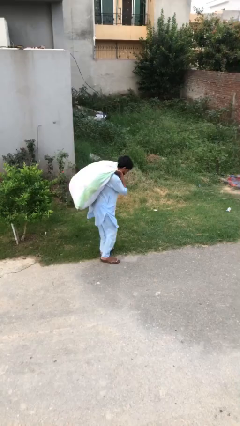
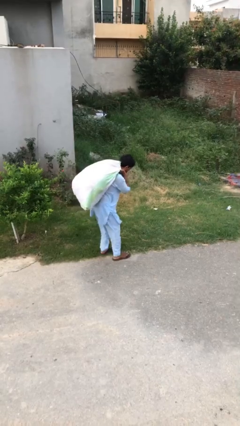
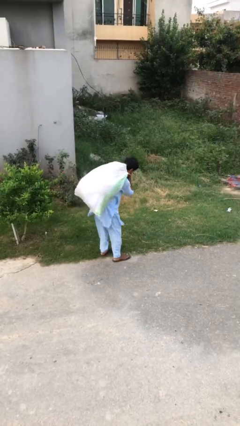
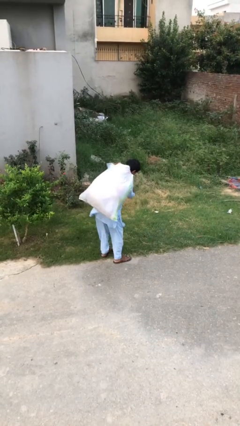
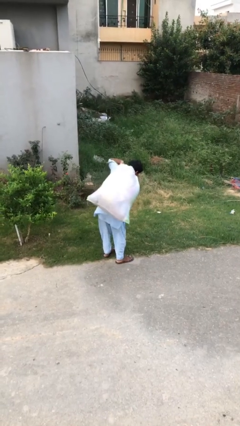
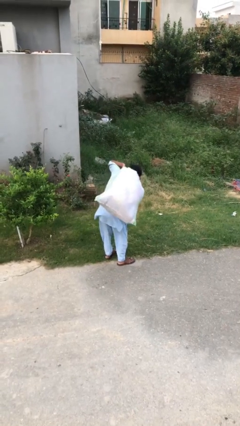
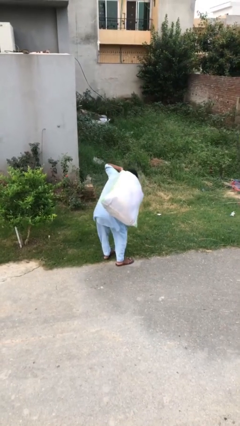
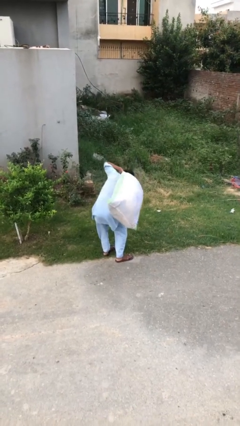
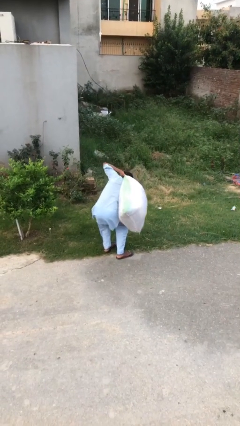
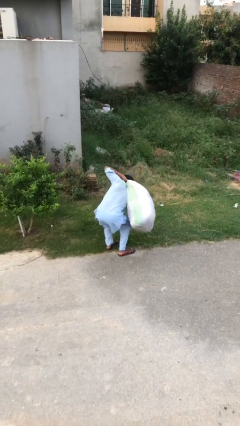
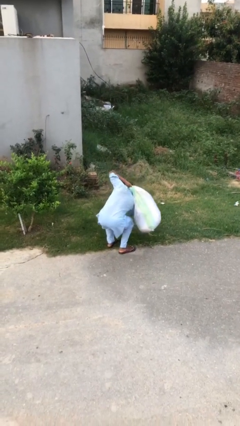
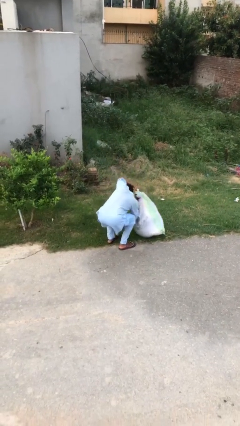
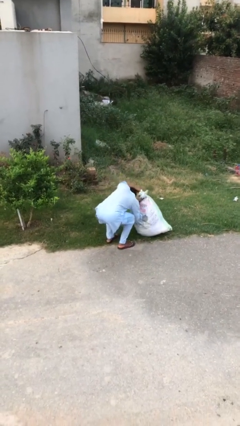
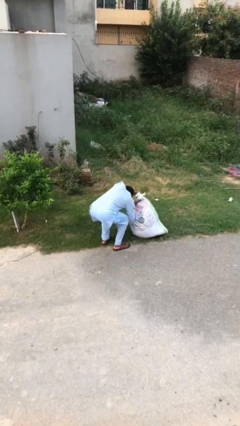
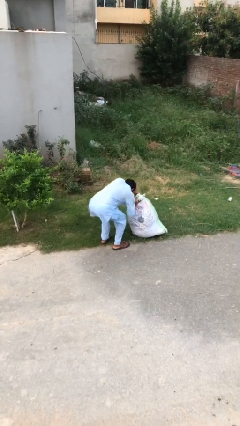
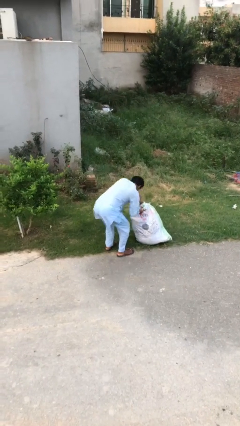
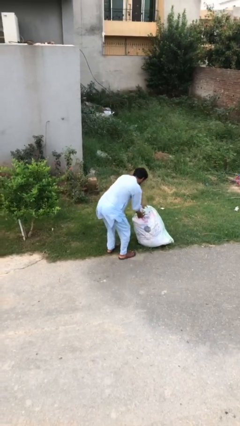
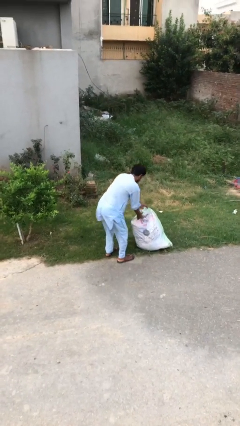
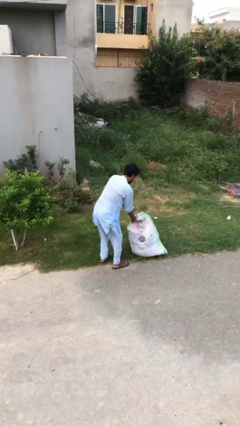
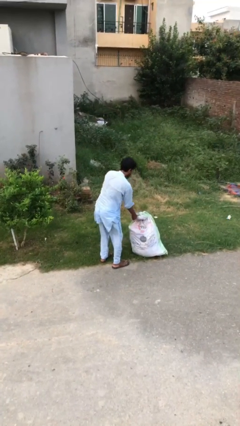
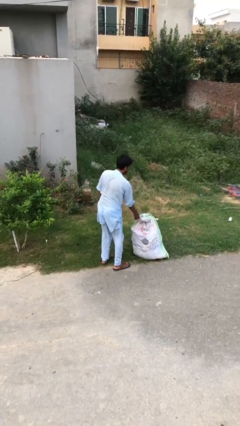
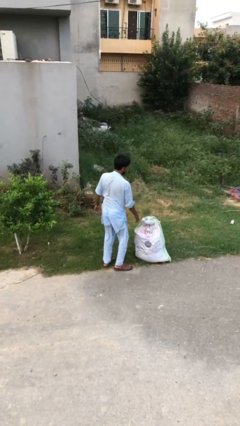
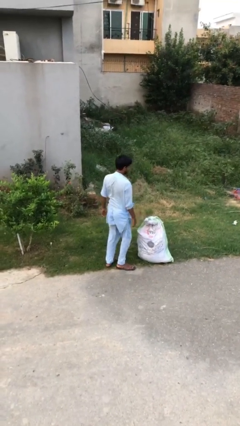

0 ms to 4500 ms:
person puts down object on floor

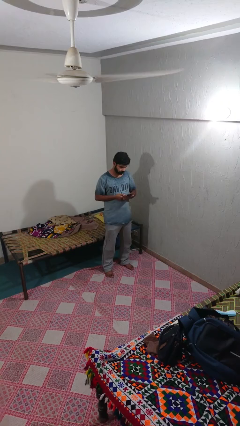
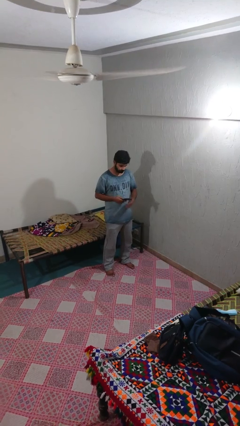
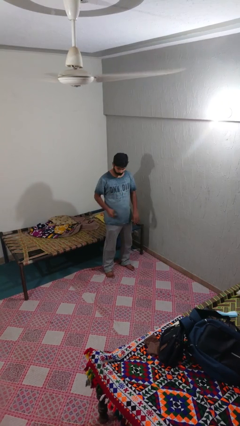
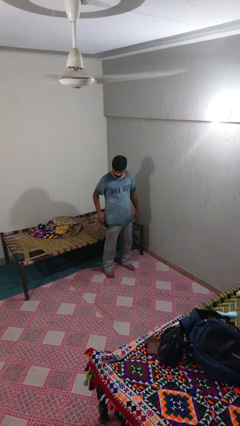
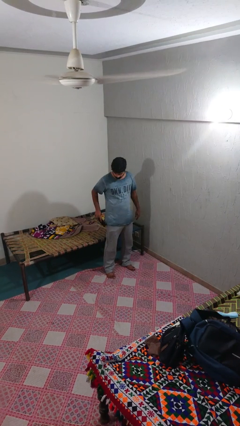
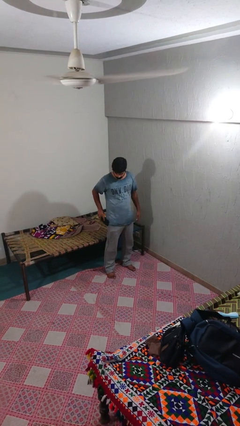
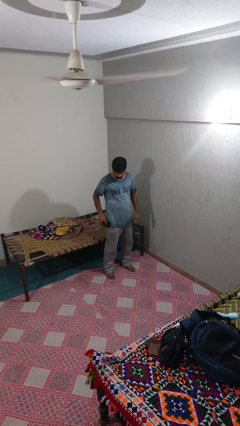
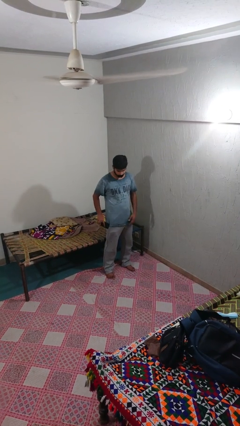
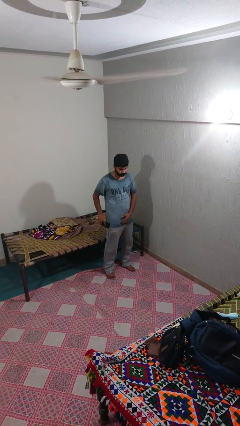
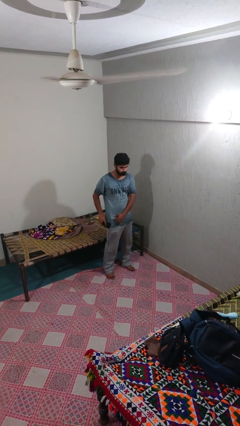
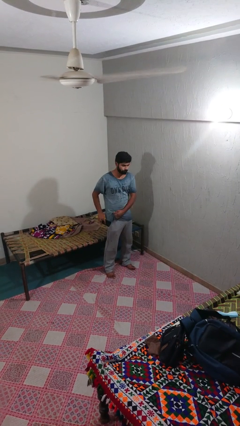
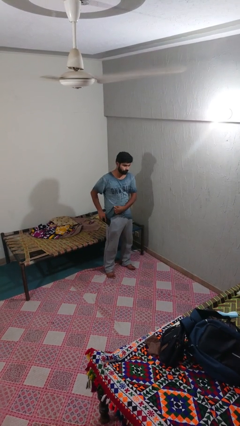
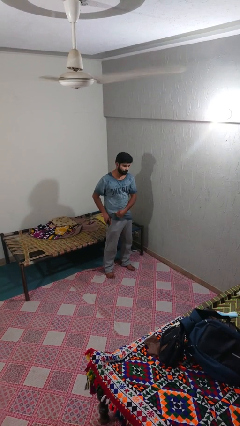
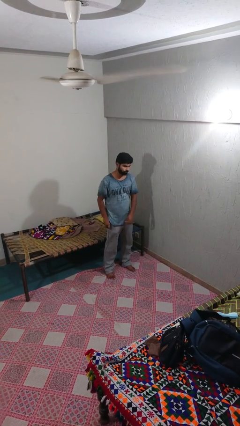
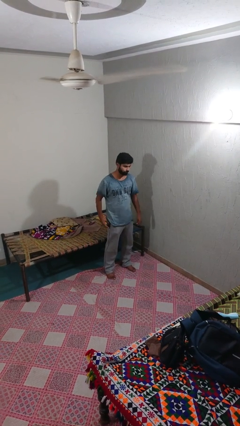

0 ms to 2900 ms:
person puts phone into pocket

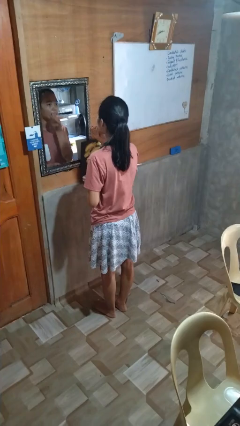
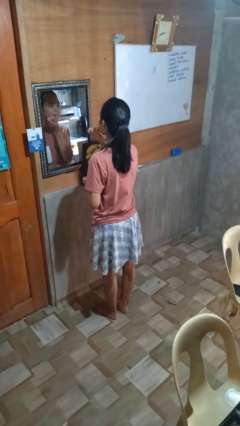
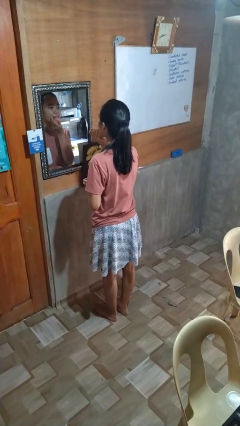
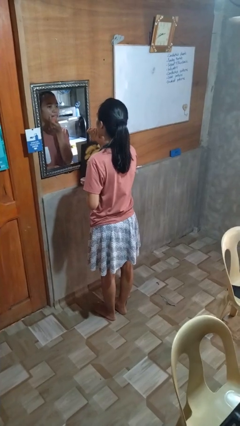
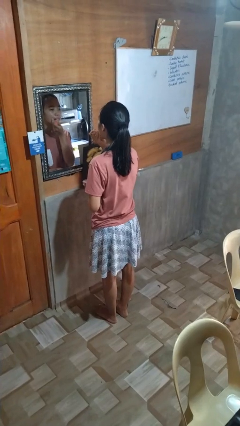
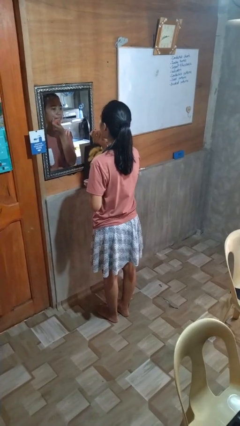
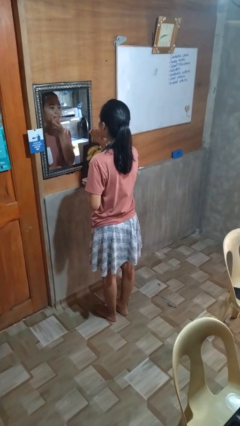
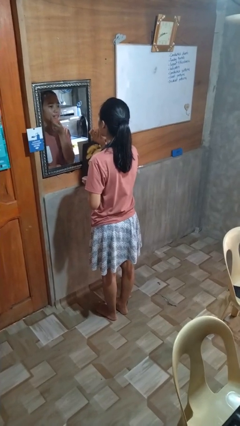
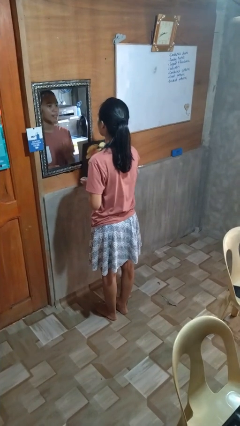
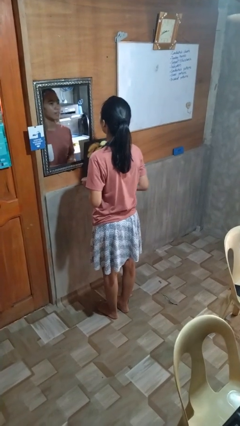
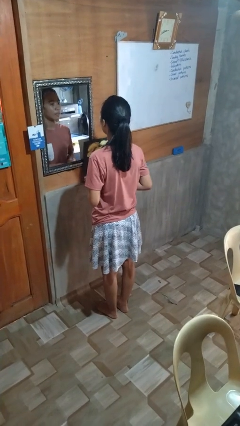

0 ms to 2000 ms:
person applies lip makeup

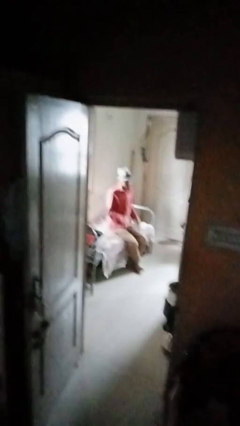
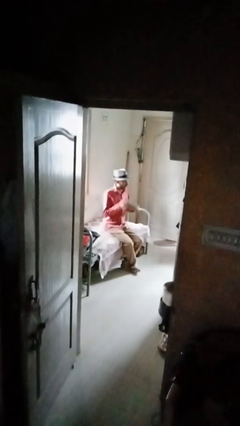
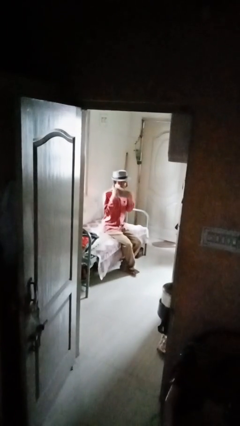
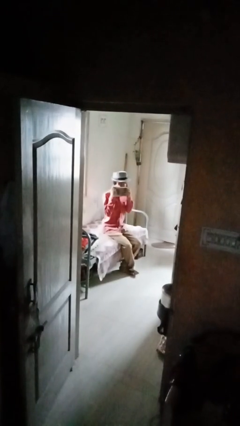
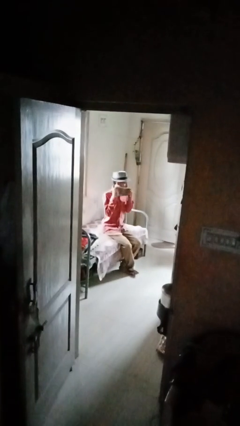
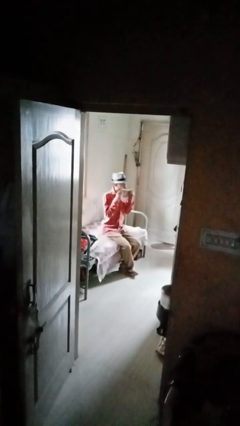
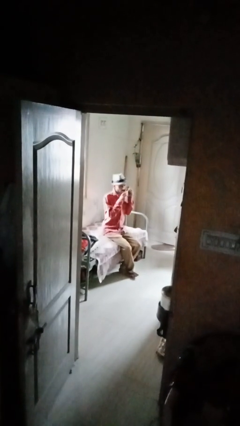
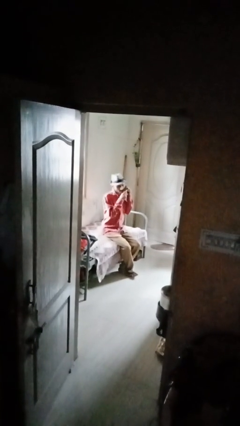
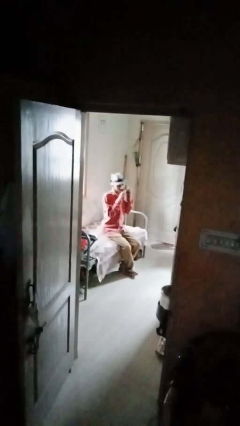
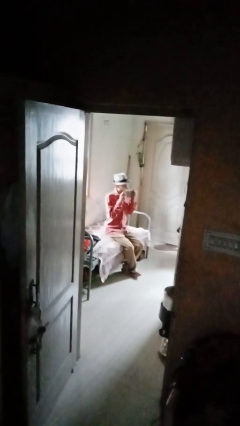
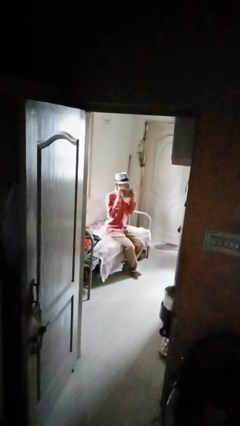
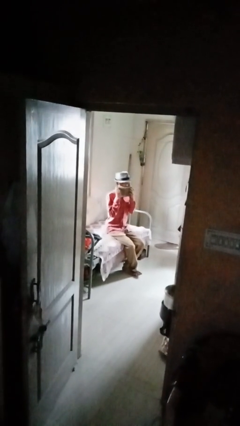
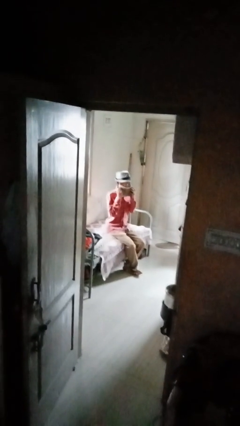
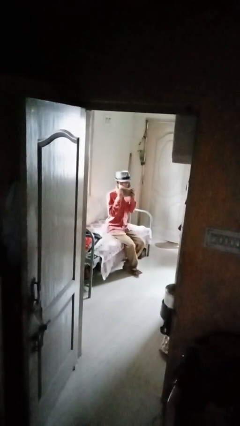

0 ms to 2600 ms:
person wipes mouth with napkin

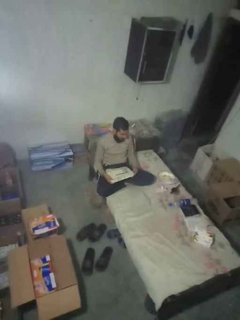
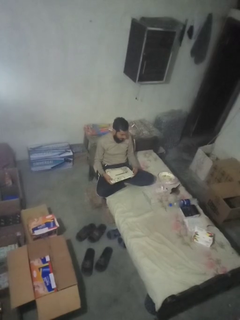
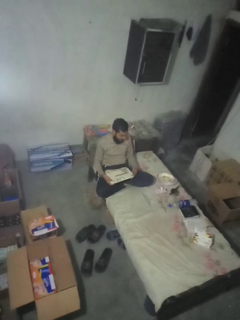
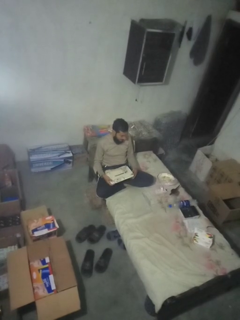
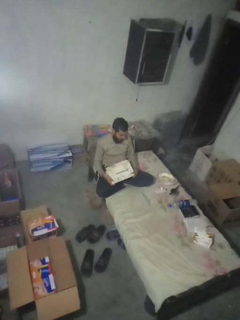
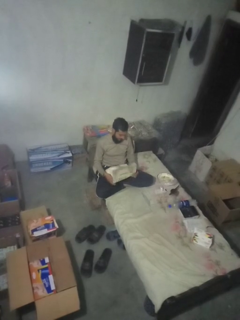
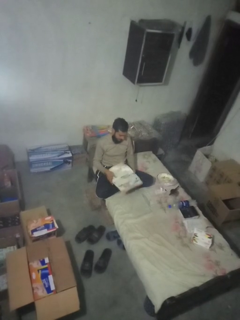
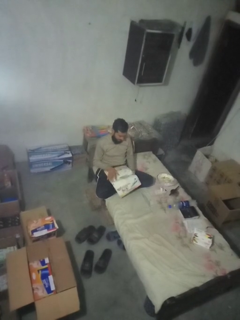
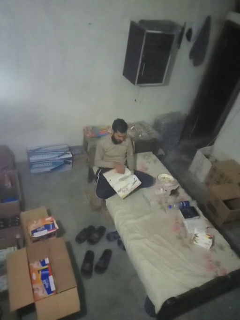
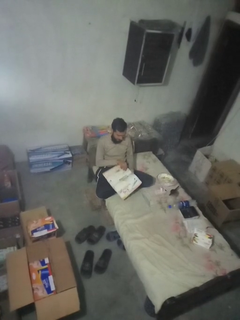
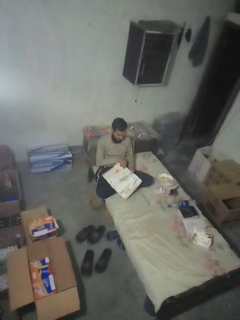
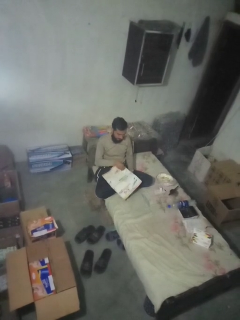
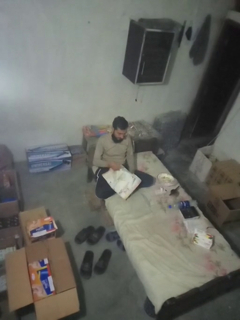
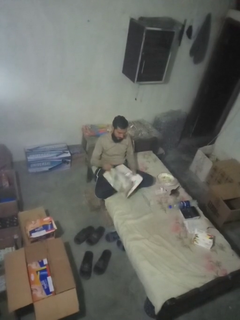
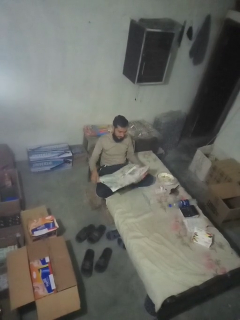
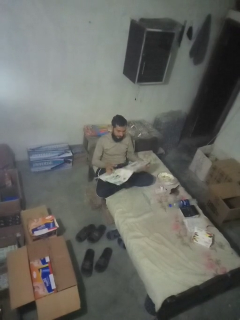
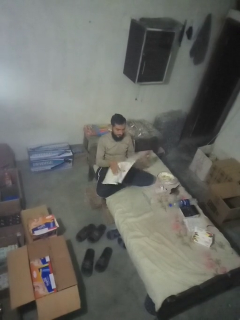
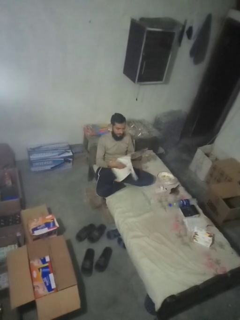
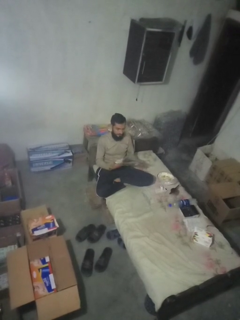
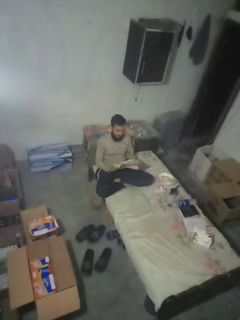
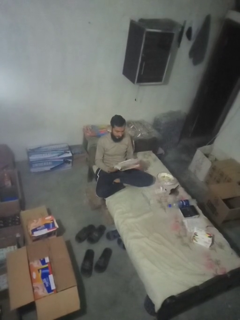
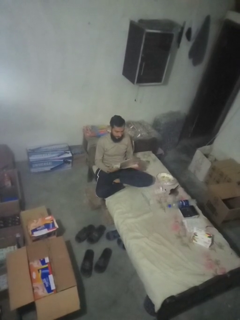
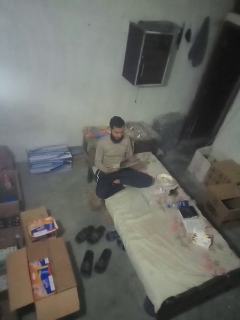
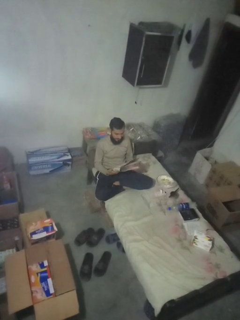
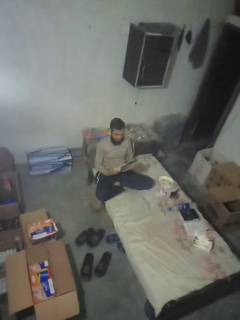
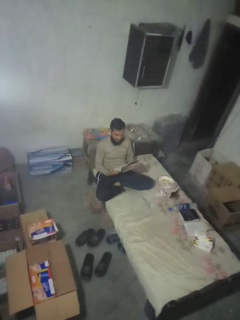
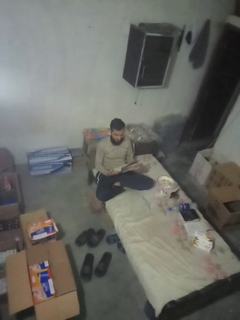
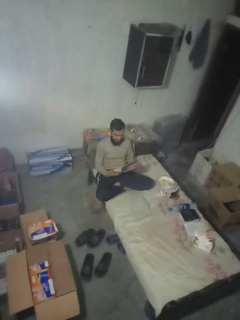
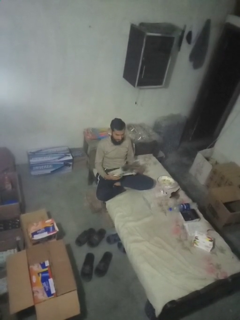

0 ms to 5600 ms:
person reads magazine

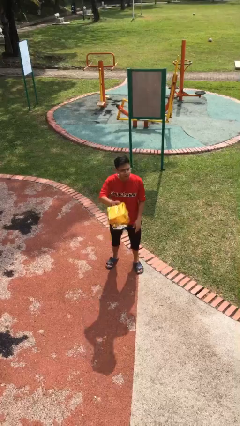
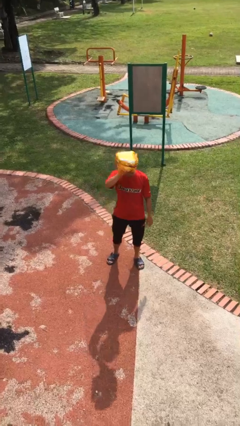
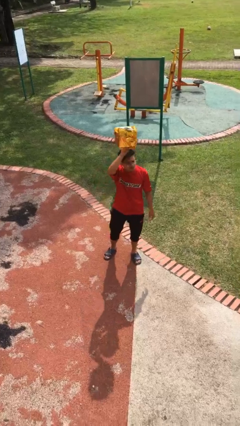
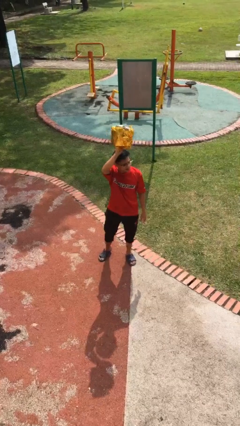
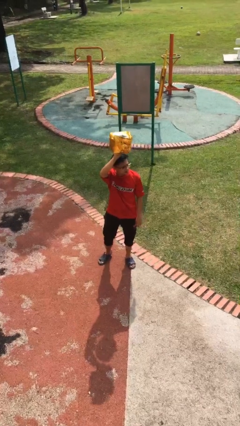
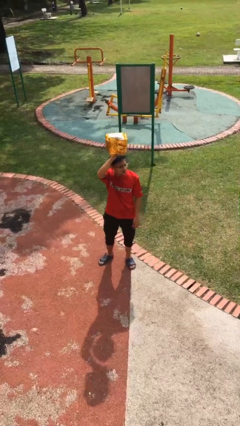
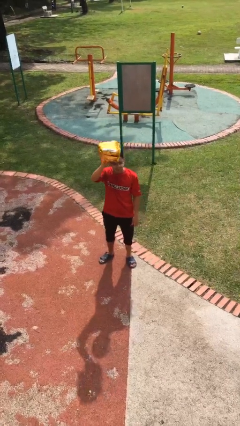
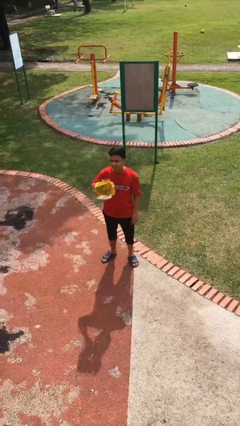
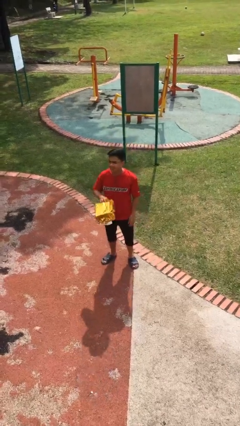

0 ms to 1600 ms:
person holds object above head
